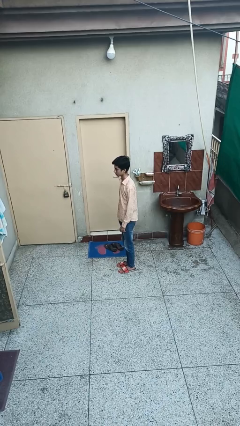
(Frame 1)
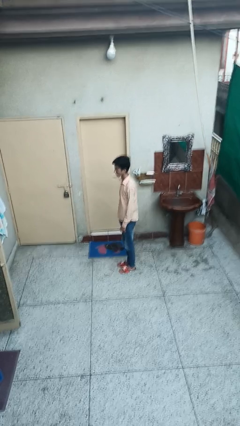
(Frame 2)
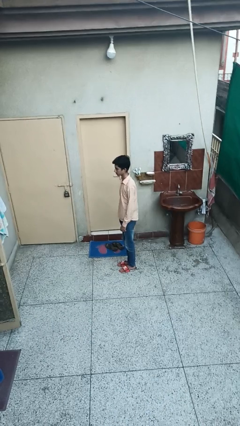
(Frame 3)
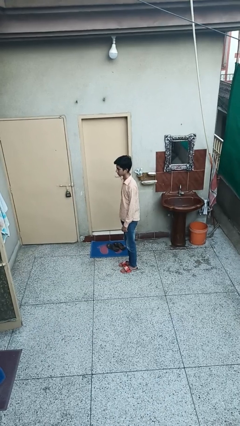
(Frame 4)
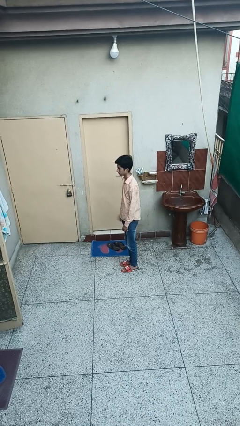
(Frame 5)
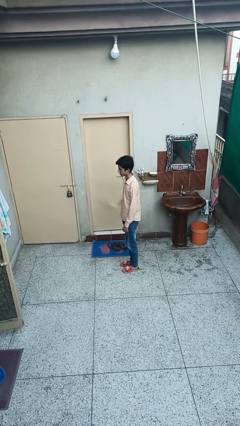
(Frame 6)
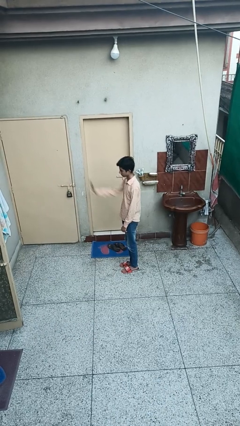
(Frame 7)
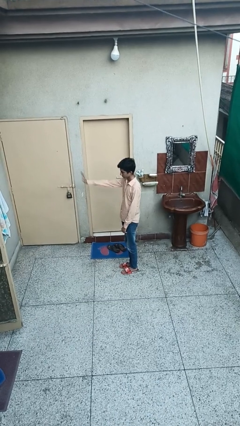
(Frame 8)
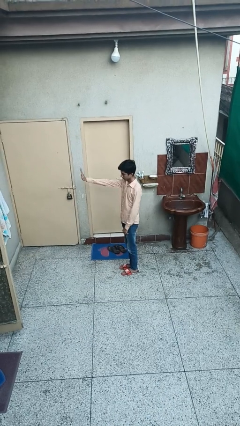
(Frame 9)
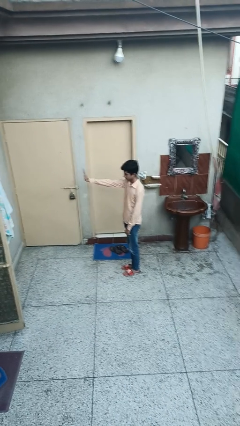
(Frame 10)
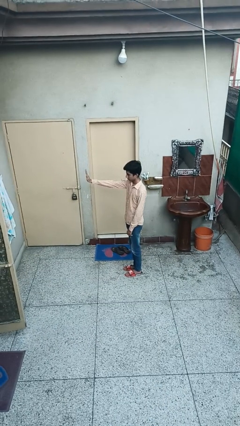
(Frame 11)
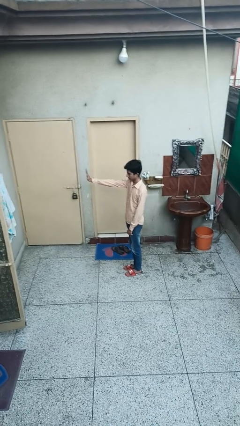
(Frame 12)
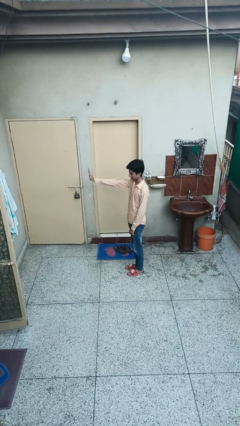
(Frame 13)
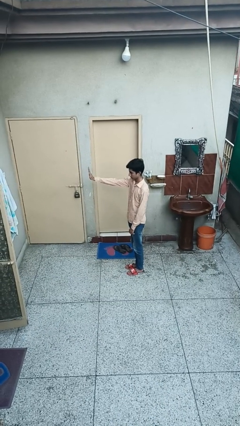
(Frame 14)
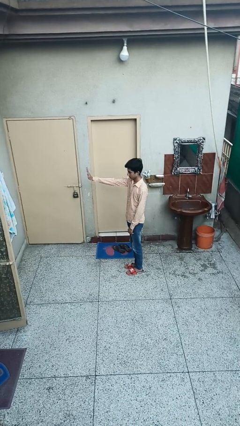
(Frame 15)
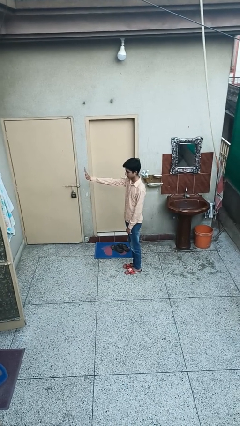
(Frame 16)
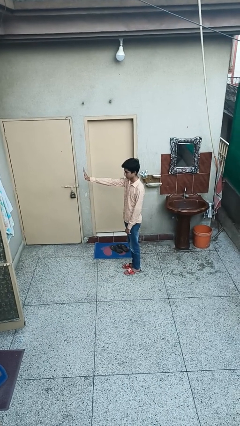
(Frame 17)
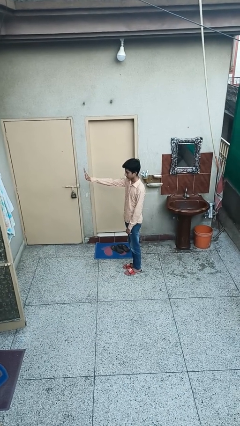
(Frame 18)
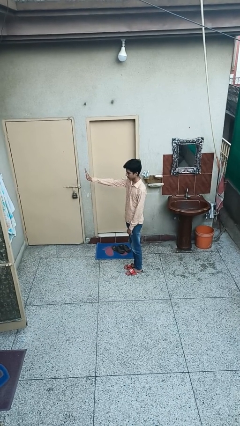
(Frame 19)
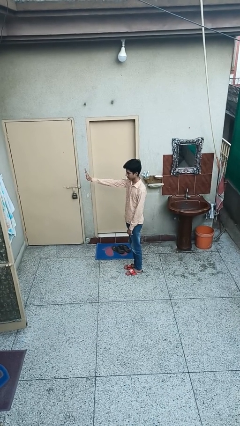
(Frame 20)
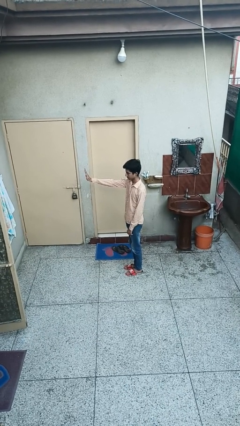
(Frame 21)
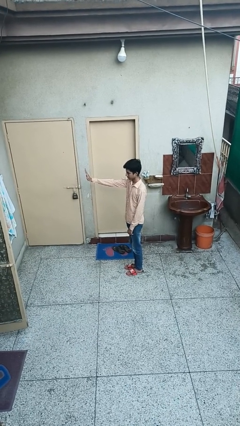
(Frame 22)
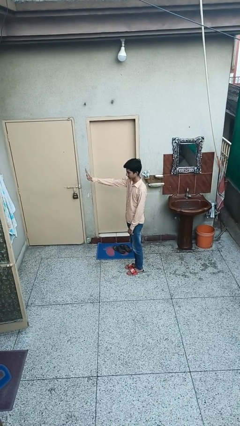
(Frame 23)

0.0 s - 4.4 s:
person gestures stop

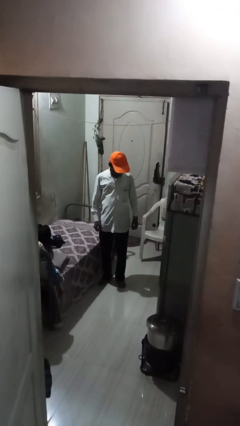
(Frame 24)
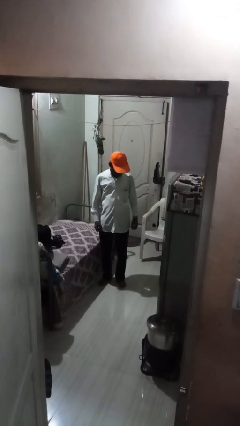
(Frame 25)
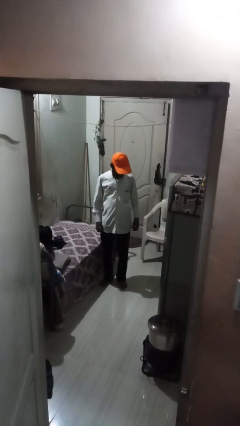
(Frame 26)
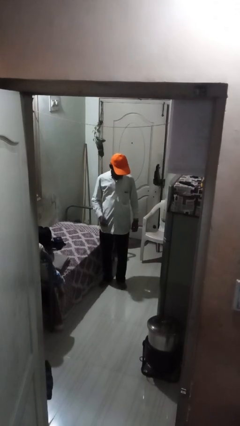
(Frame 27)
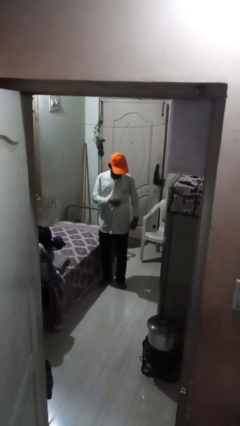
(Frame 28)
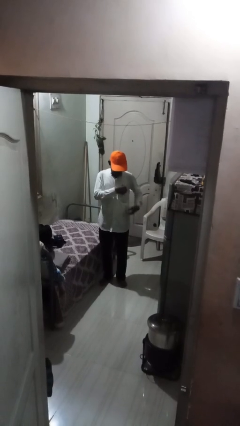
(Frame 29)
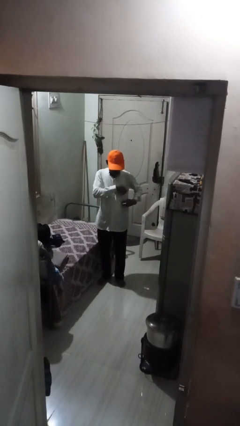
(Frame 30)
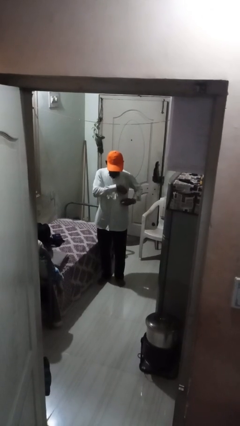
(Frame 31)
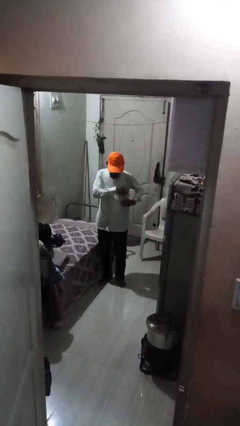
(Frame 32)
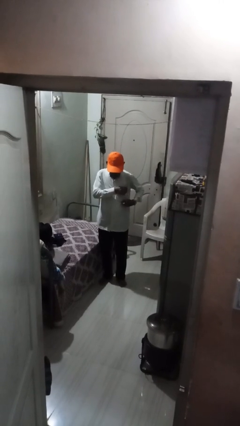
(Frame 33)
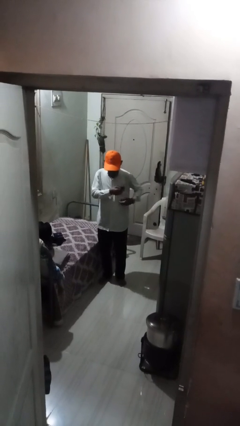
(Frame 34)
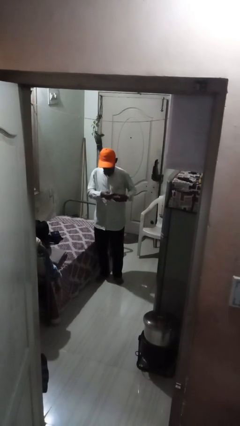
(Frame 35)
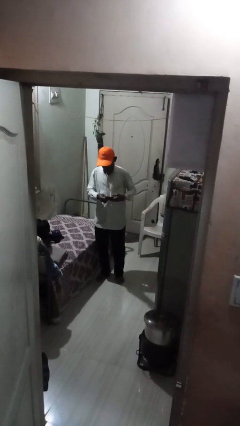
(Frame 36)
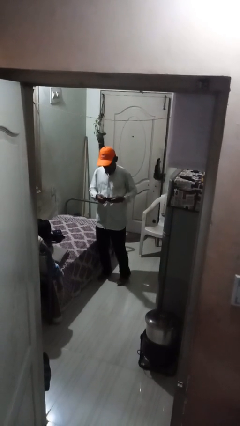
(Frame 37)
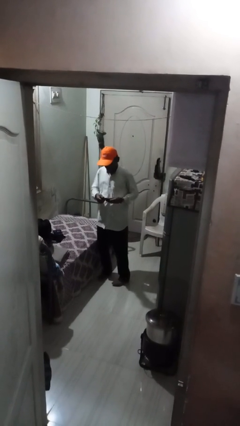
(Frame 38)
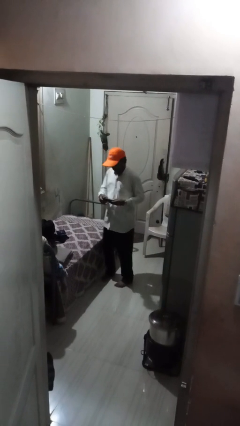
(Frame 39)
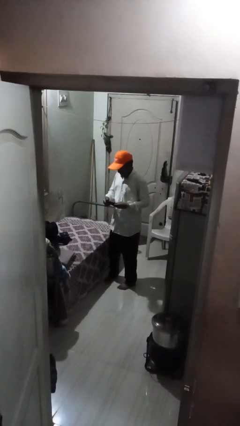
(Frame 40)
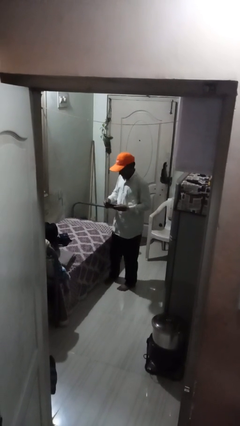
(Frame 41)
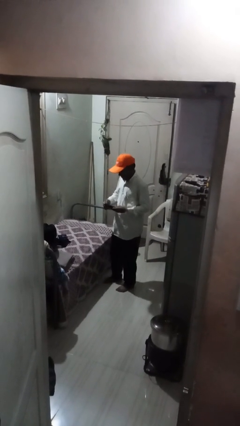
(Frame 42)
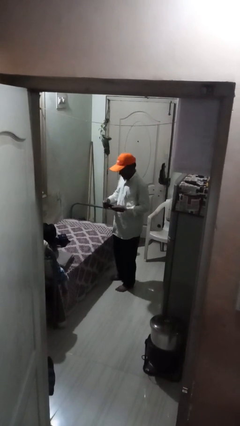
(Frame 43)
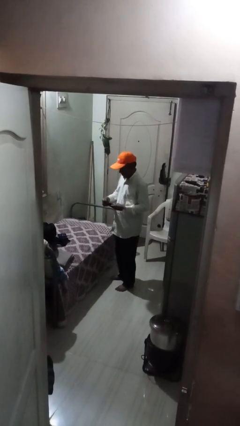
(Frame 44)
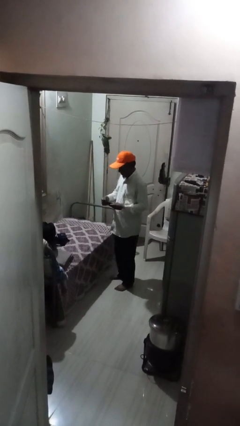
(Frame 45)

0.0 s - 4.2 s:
person takes phone from pocket

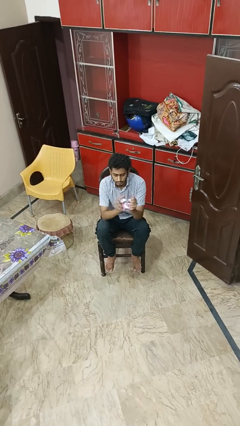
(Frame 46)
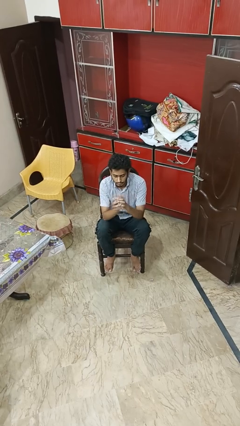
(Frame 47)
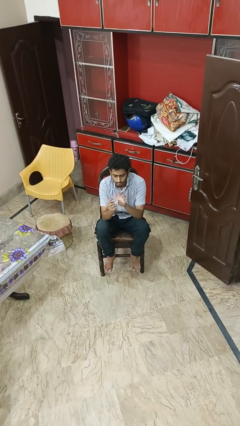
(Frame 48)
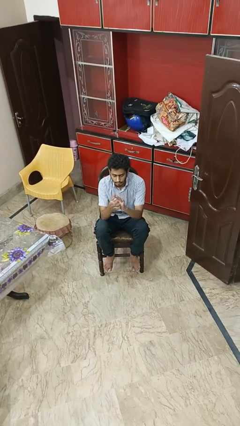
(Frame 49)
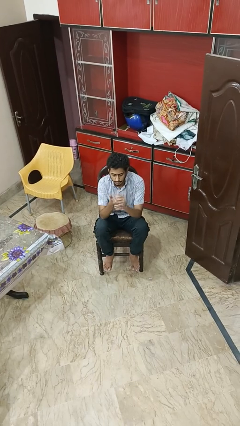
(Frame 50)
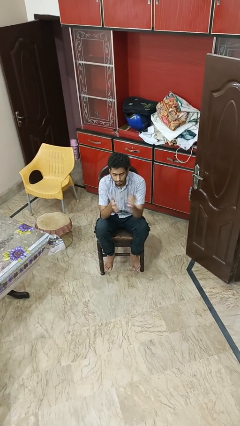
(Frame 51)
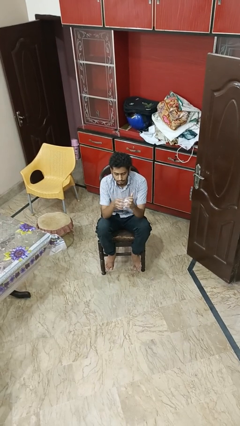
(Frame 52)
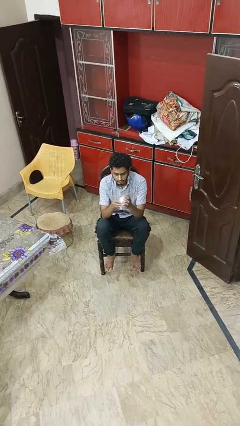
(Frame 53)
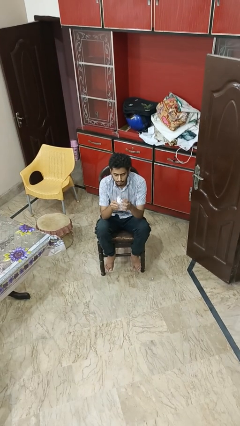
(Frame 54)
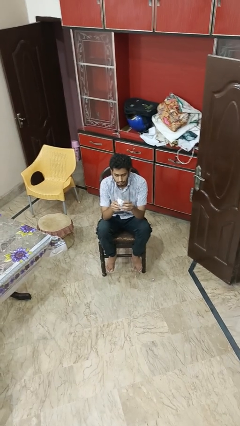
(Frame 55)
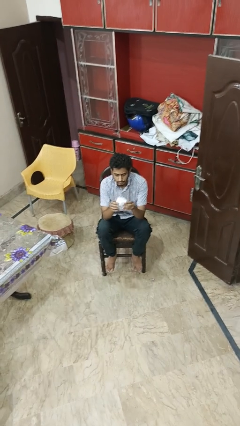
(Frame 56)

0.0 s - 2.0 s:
person crumples paper

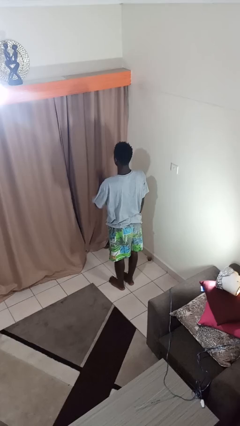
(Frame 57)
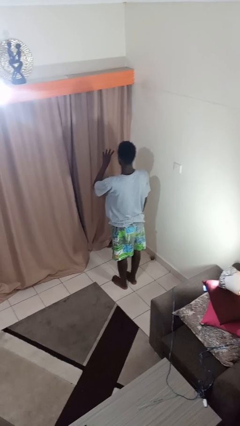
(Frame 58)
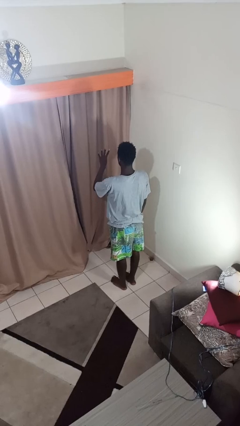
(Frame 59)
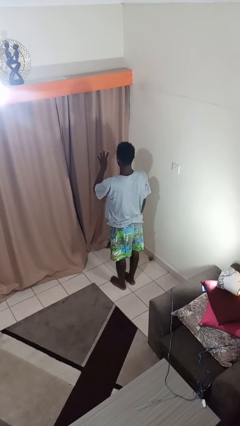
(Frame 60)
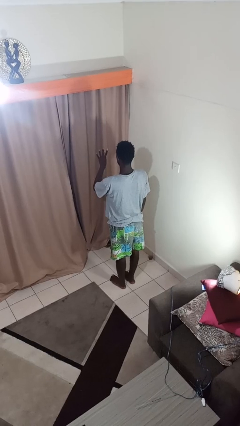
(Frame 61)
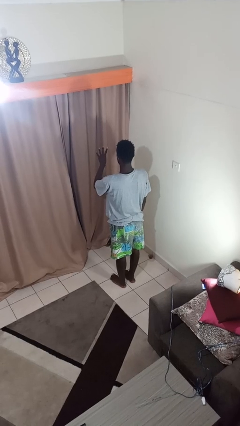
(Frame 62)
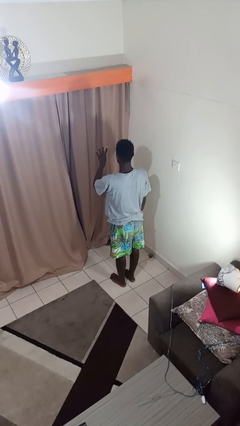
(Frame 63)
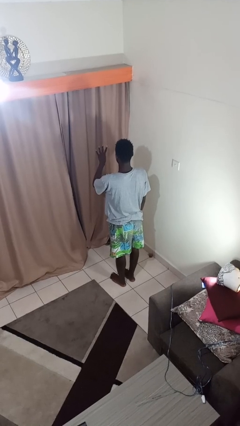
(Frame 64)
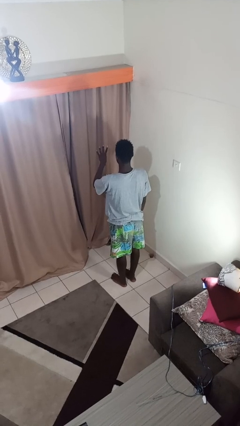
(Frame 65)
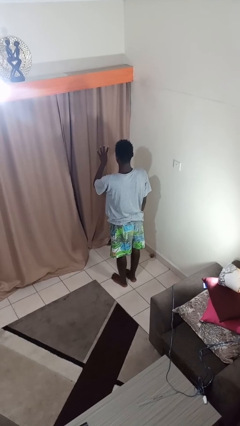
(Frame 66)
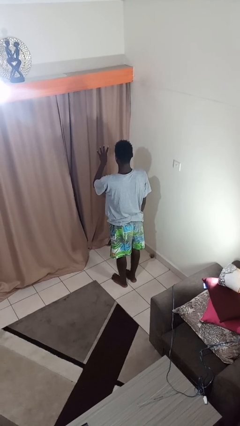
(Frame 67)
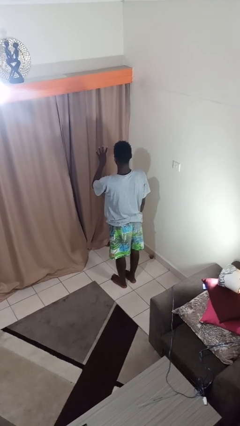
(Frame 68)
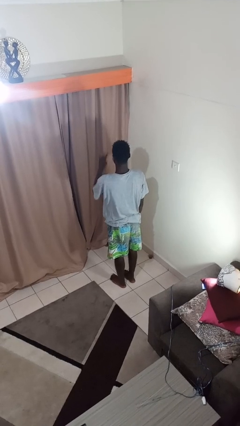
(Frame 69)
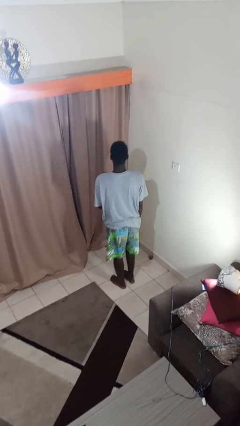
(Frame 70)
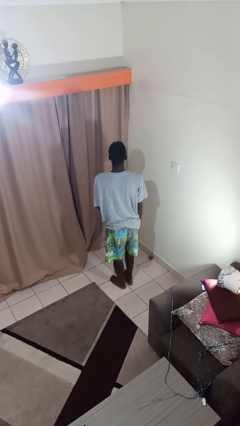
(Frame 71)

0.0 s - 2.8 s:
person gestures number four

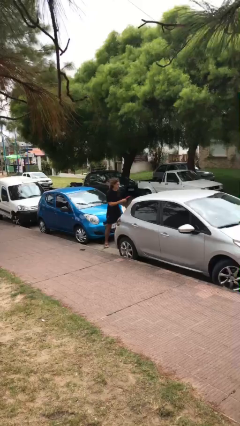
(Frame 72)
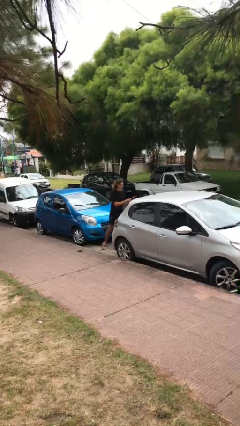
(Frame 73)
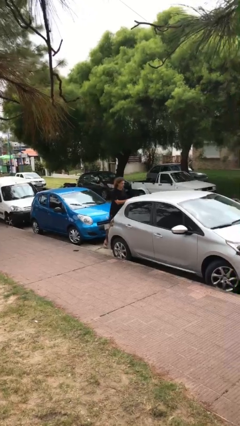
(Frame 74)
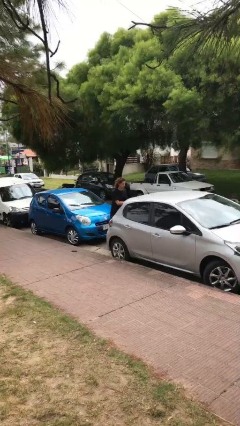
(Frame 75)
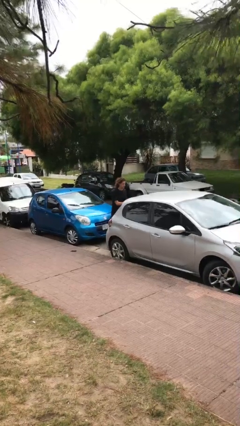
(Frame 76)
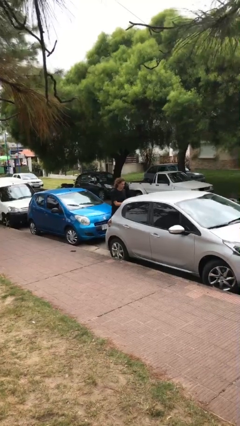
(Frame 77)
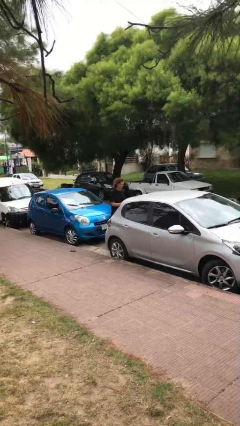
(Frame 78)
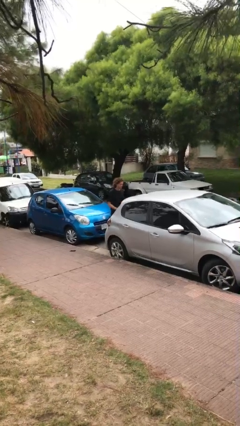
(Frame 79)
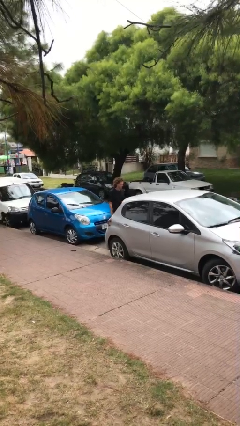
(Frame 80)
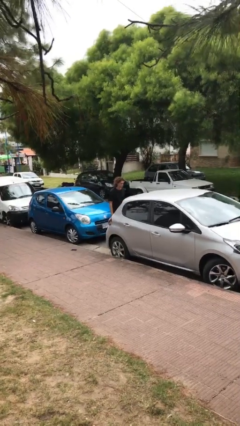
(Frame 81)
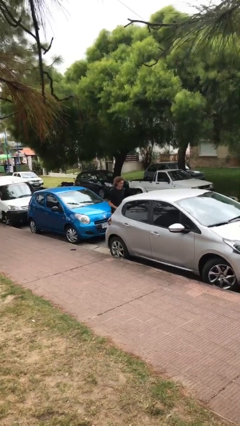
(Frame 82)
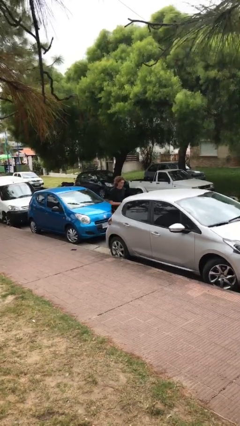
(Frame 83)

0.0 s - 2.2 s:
person loads car

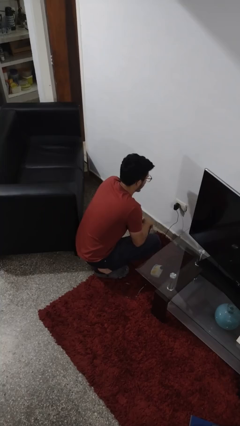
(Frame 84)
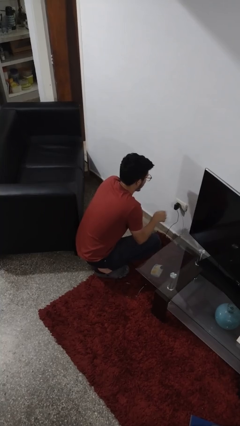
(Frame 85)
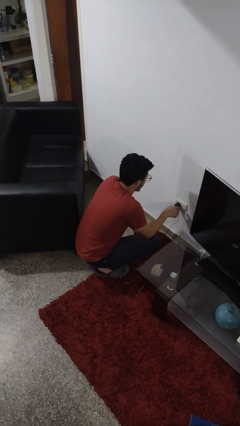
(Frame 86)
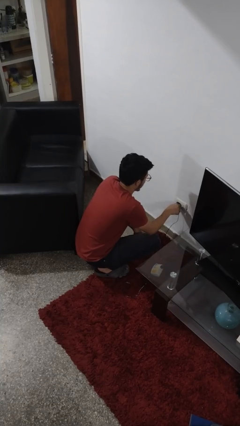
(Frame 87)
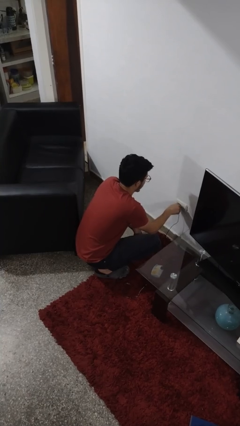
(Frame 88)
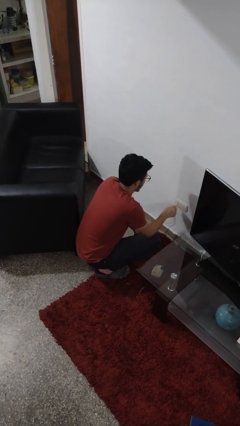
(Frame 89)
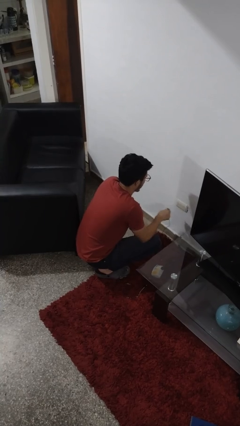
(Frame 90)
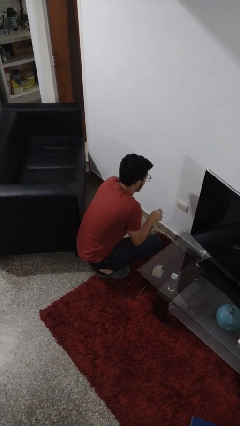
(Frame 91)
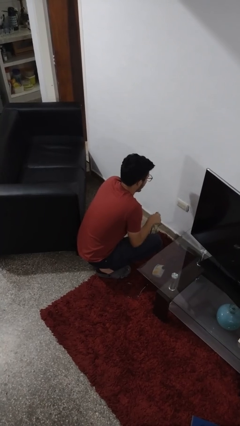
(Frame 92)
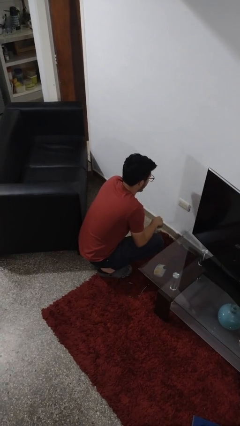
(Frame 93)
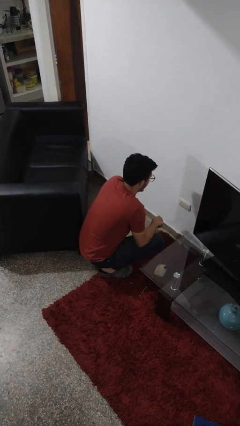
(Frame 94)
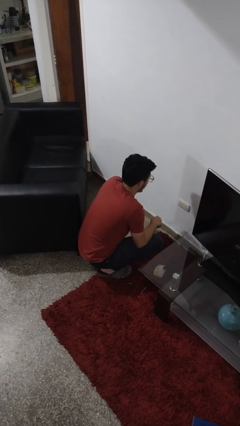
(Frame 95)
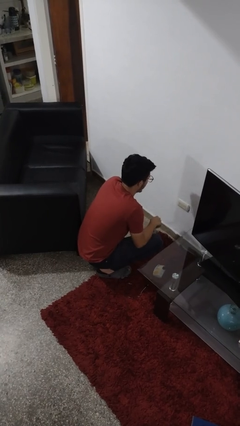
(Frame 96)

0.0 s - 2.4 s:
person unplugs from electrical socket
